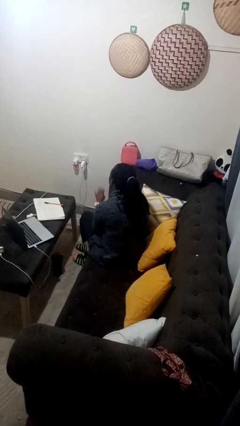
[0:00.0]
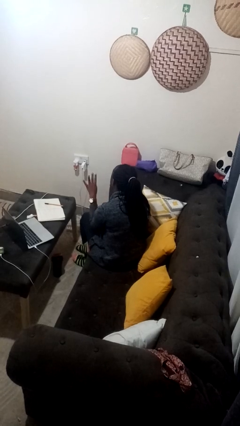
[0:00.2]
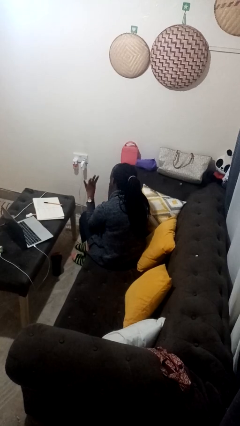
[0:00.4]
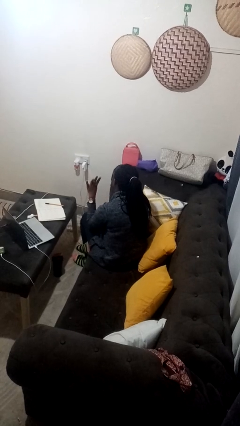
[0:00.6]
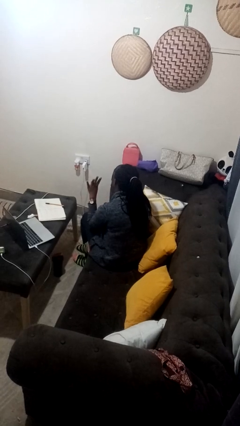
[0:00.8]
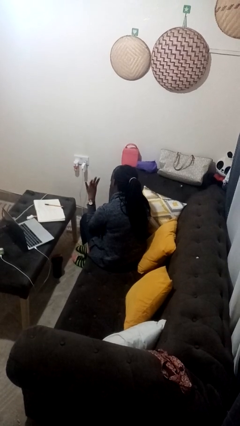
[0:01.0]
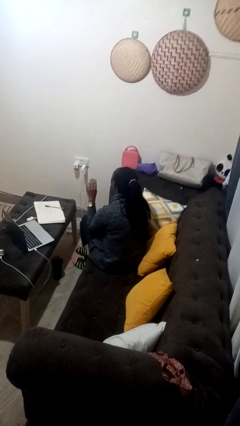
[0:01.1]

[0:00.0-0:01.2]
person gestures number four

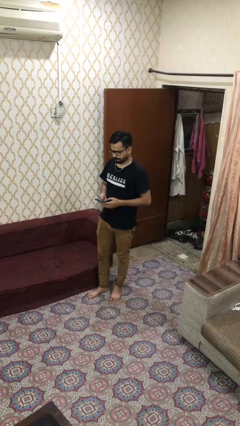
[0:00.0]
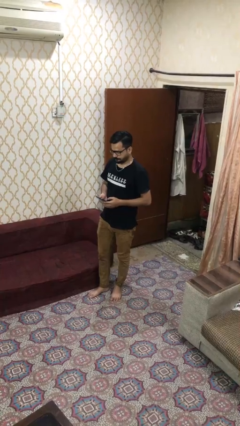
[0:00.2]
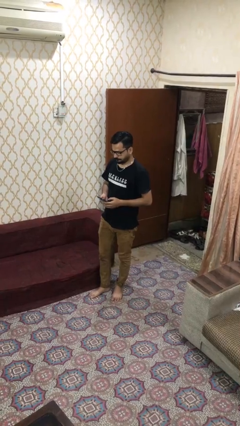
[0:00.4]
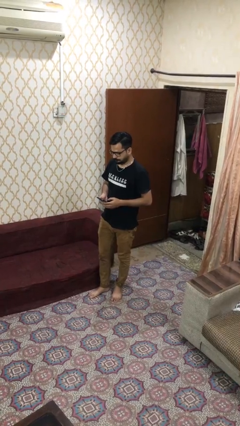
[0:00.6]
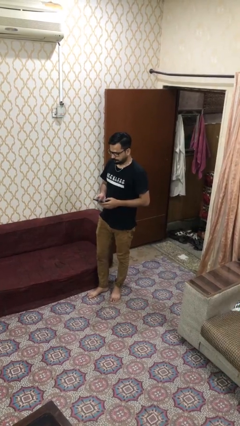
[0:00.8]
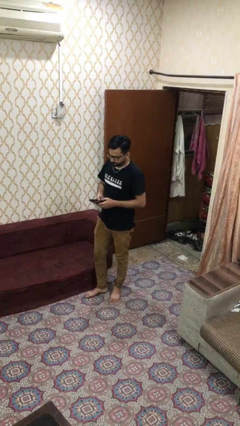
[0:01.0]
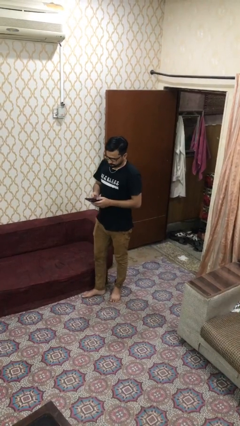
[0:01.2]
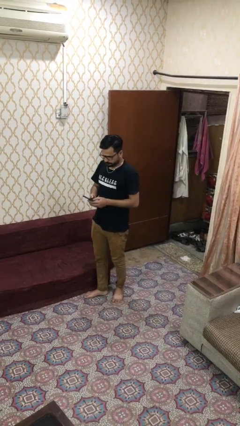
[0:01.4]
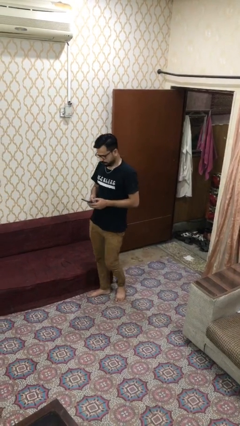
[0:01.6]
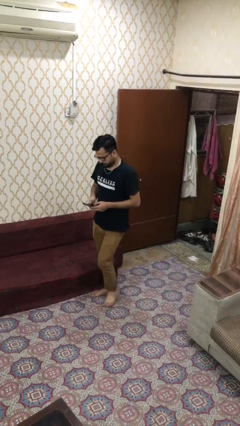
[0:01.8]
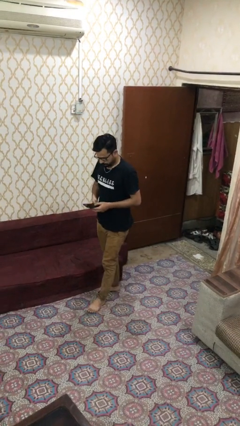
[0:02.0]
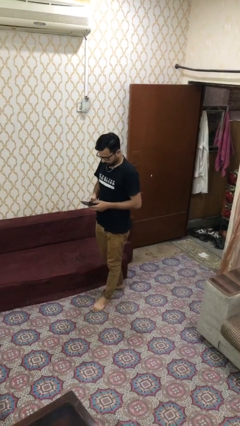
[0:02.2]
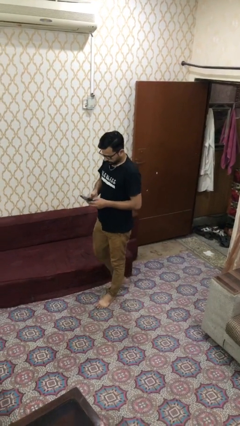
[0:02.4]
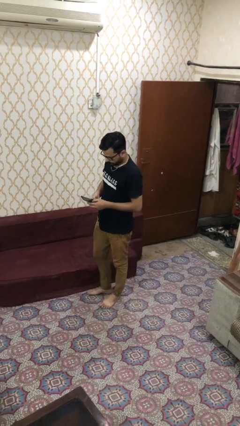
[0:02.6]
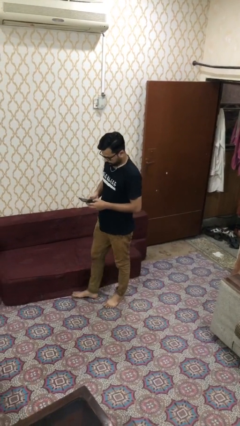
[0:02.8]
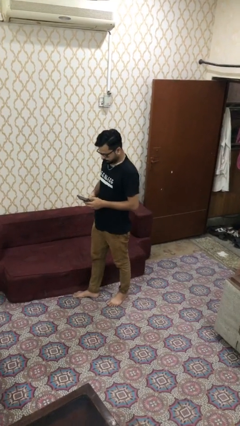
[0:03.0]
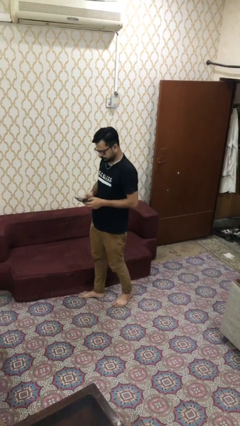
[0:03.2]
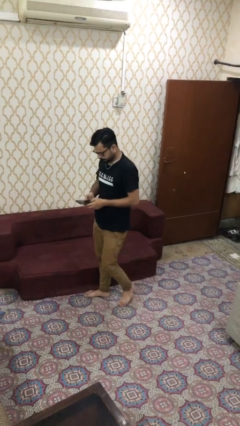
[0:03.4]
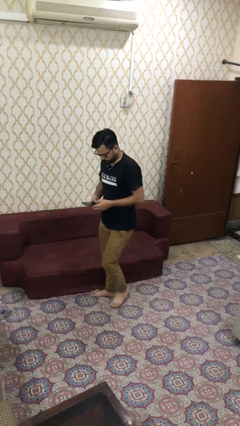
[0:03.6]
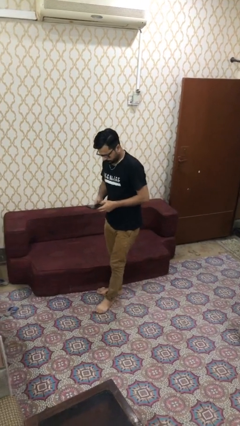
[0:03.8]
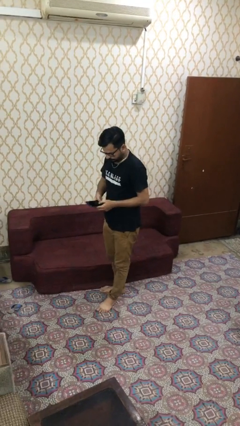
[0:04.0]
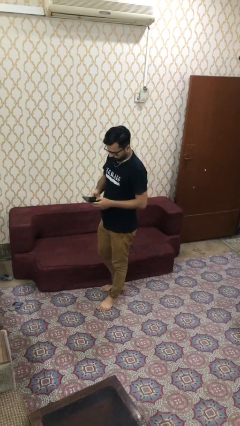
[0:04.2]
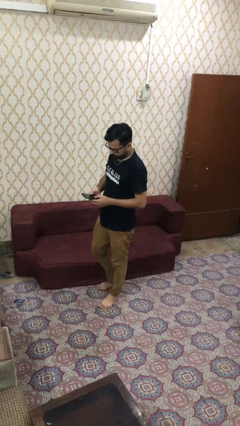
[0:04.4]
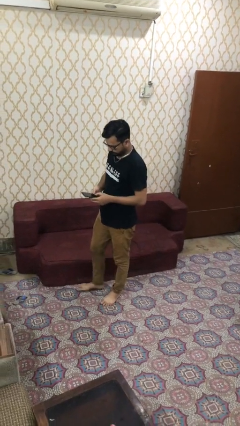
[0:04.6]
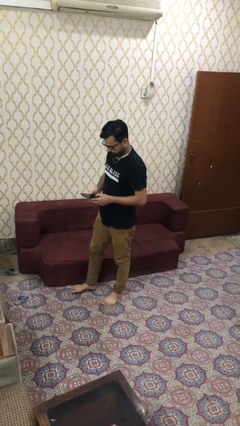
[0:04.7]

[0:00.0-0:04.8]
person texts on phone

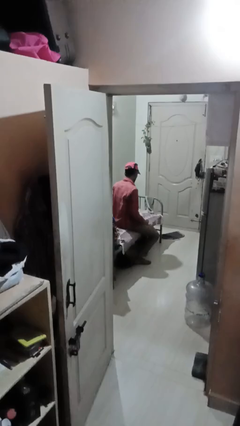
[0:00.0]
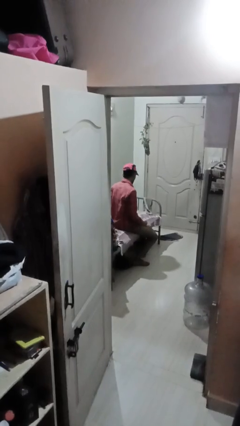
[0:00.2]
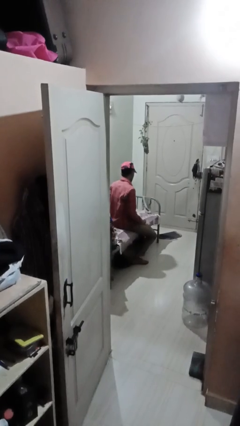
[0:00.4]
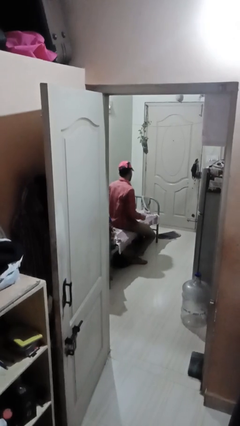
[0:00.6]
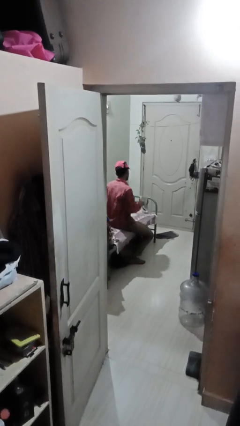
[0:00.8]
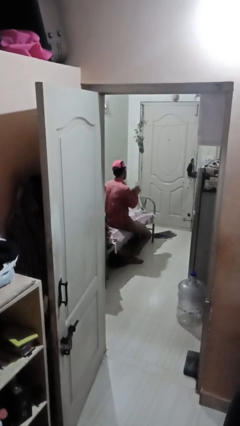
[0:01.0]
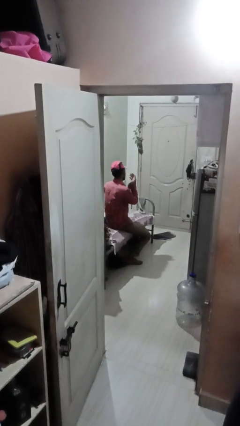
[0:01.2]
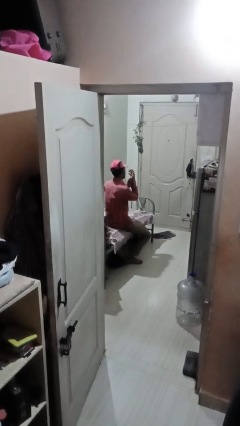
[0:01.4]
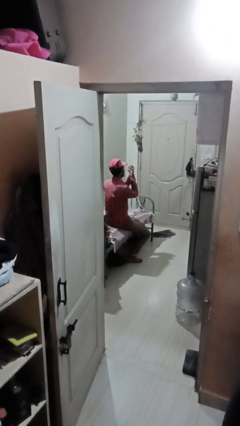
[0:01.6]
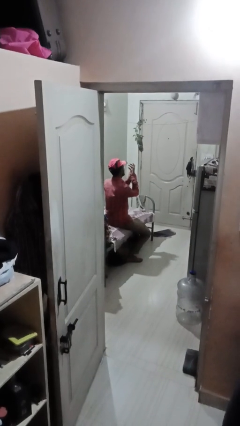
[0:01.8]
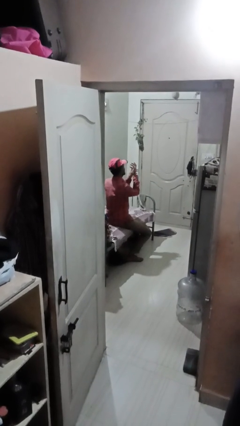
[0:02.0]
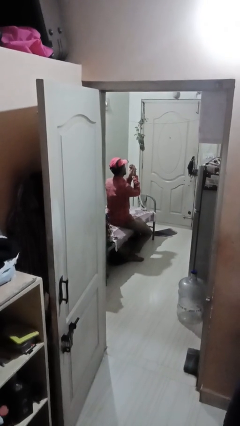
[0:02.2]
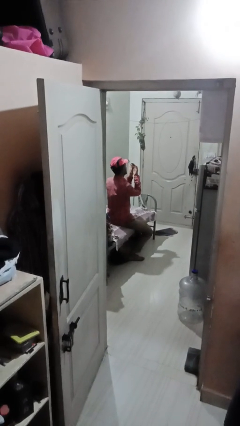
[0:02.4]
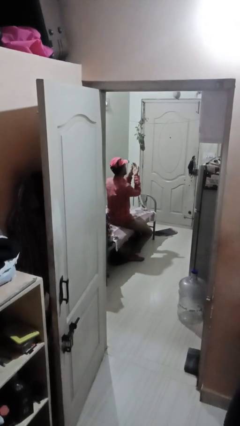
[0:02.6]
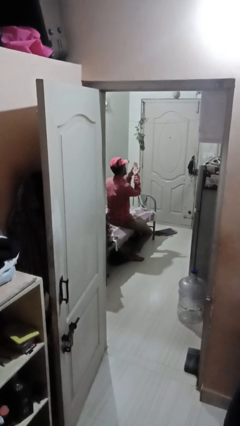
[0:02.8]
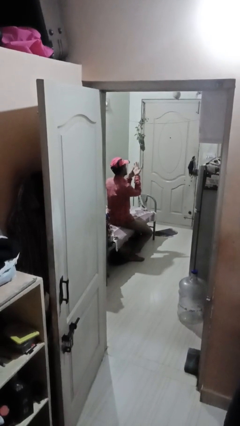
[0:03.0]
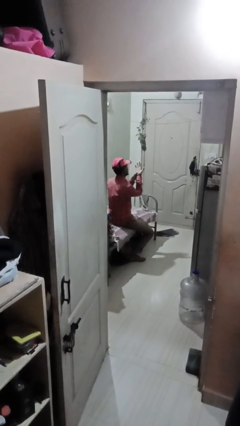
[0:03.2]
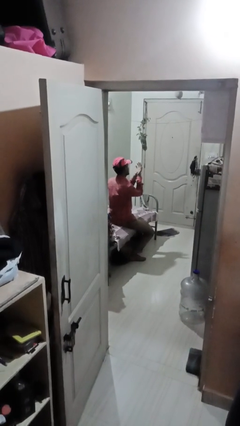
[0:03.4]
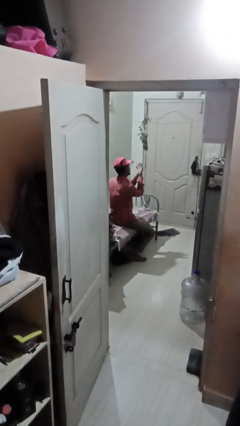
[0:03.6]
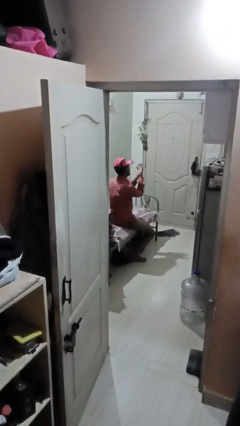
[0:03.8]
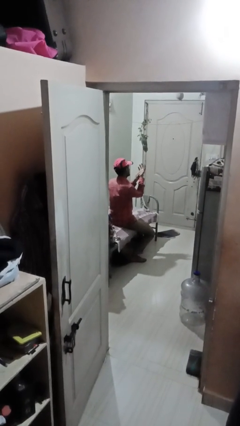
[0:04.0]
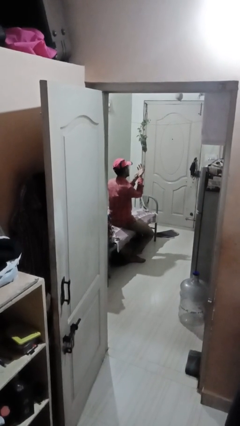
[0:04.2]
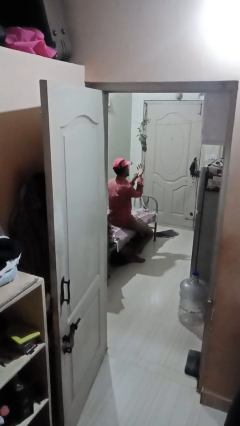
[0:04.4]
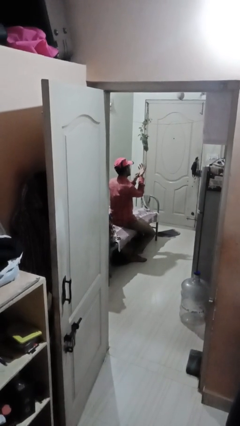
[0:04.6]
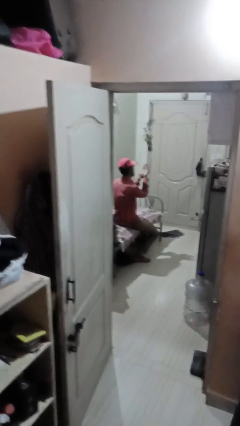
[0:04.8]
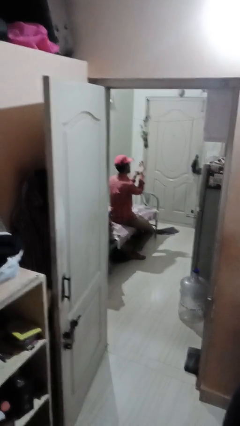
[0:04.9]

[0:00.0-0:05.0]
person looks at hands in lap

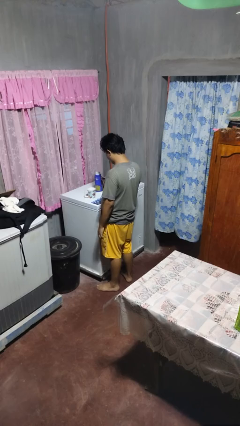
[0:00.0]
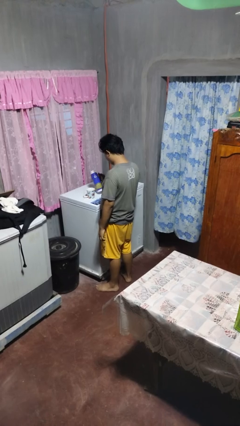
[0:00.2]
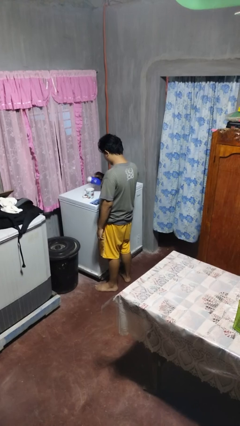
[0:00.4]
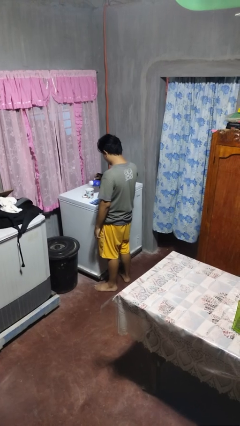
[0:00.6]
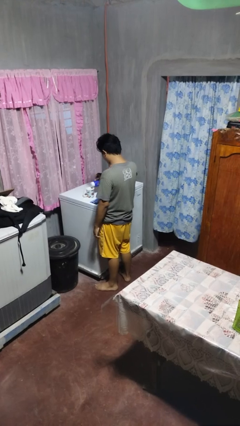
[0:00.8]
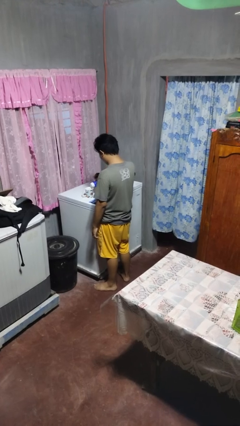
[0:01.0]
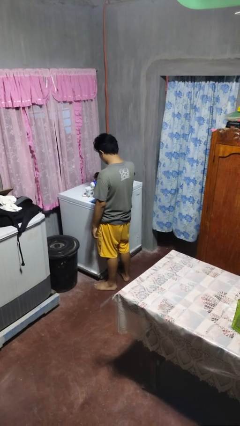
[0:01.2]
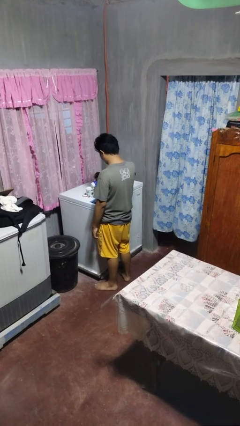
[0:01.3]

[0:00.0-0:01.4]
person pours coffee into mug

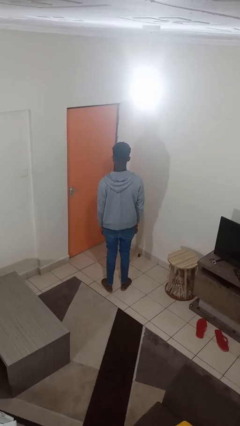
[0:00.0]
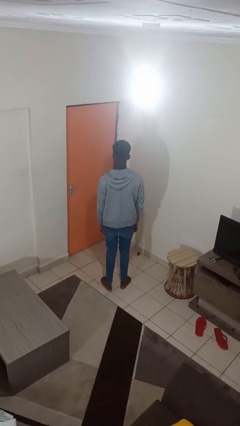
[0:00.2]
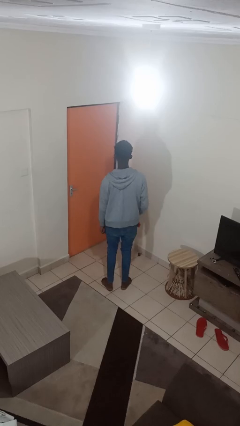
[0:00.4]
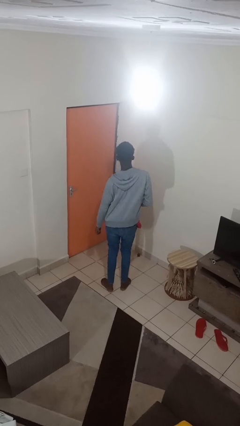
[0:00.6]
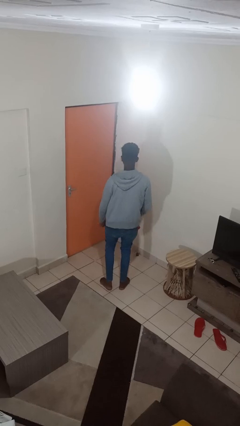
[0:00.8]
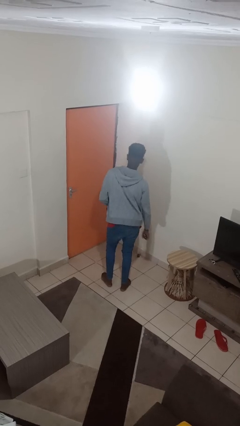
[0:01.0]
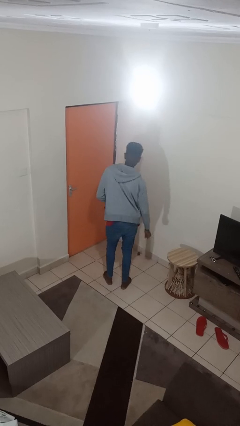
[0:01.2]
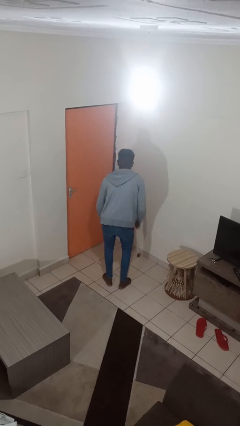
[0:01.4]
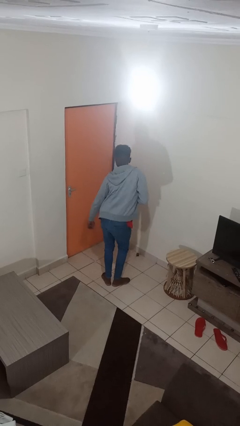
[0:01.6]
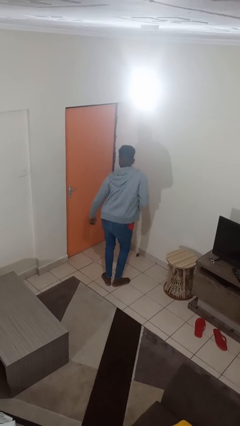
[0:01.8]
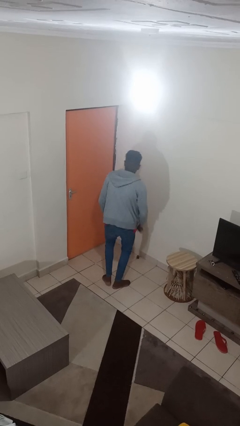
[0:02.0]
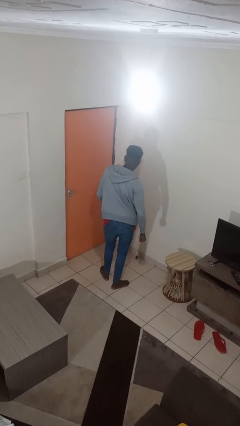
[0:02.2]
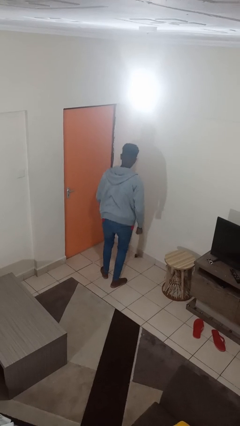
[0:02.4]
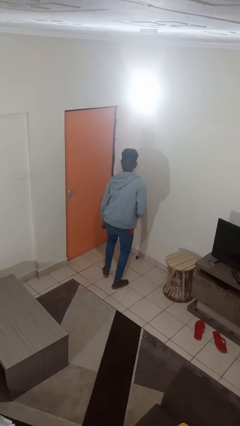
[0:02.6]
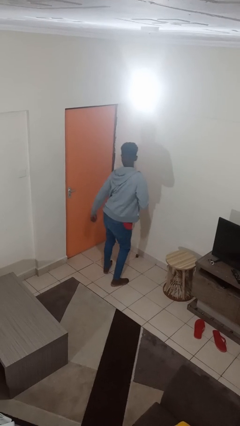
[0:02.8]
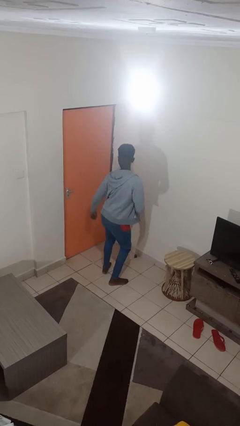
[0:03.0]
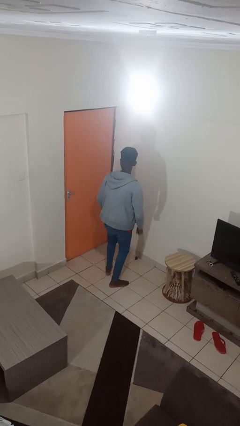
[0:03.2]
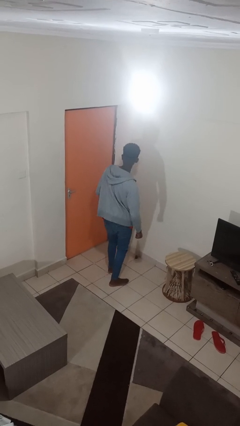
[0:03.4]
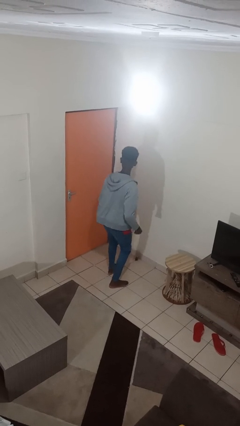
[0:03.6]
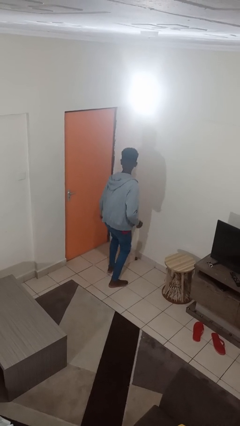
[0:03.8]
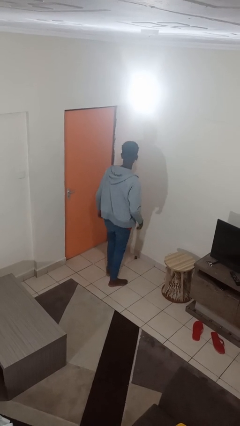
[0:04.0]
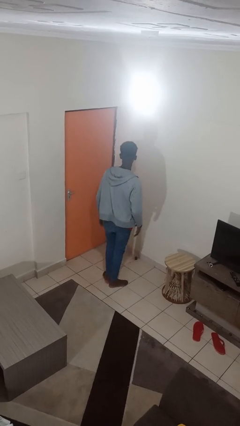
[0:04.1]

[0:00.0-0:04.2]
person dances in place

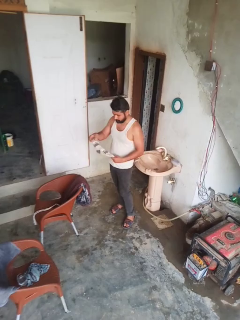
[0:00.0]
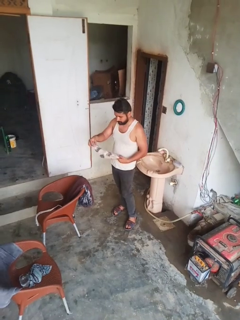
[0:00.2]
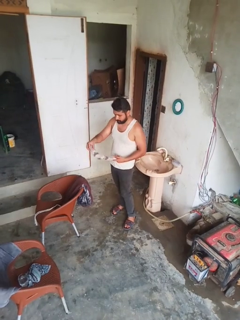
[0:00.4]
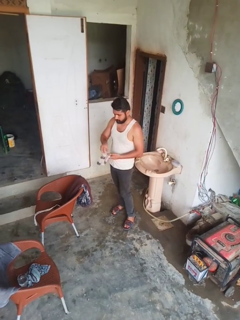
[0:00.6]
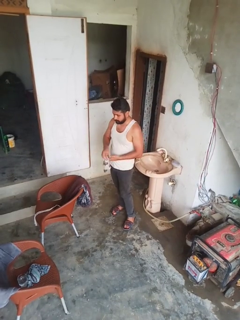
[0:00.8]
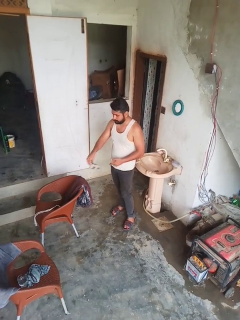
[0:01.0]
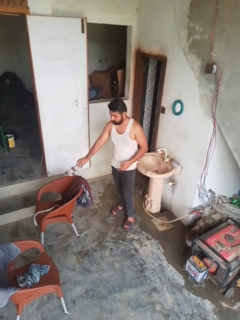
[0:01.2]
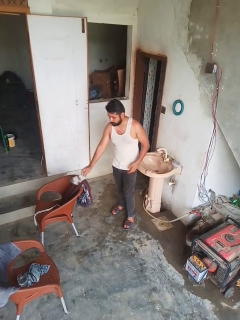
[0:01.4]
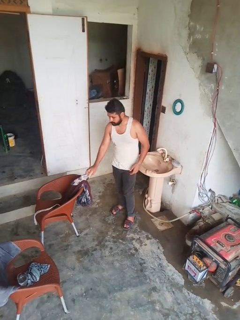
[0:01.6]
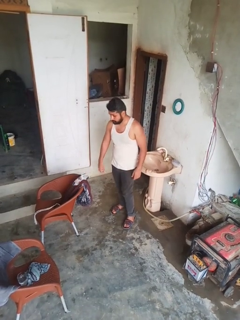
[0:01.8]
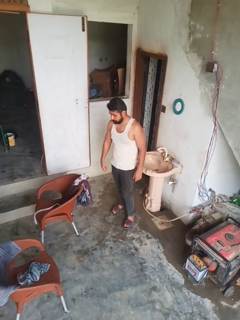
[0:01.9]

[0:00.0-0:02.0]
person folds socks
